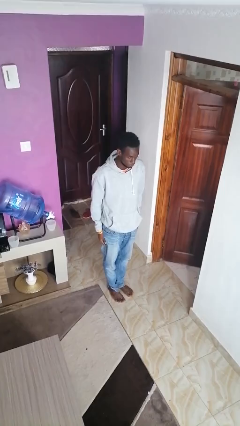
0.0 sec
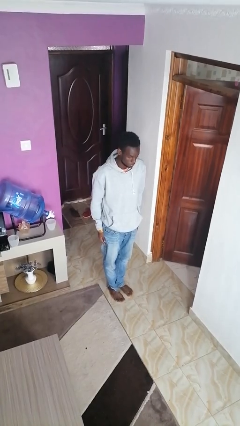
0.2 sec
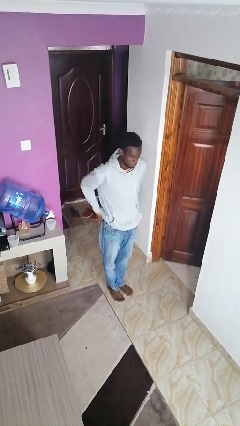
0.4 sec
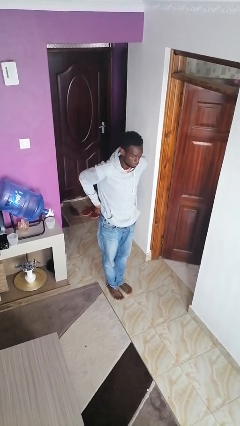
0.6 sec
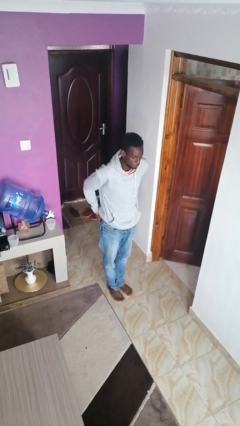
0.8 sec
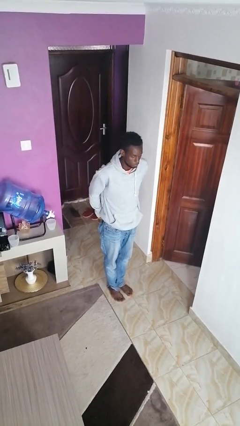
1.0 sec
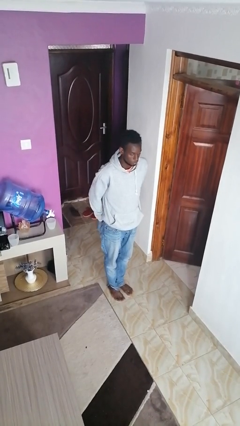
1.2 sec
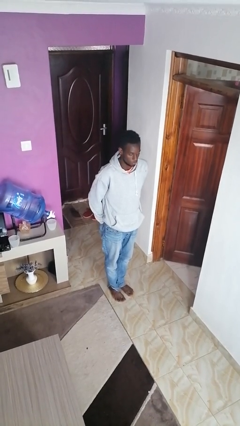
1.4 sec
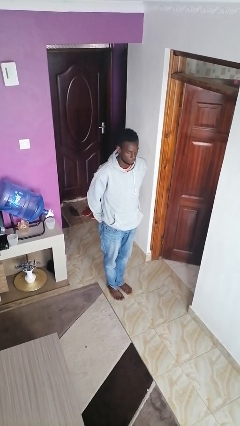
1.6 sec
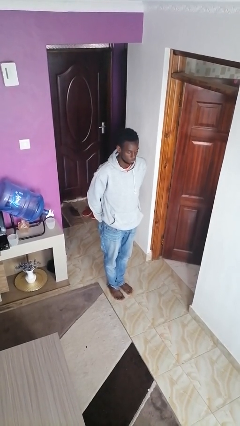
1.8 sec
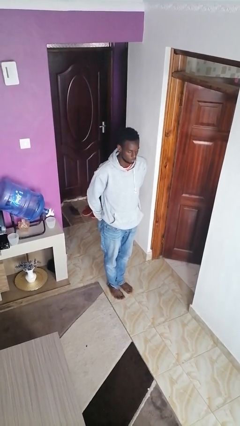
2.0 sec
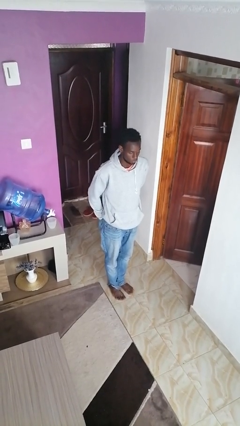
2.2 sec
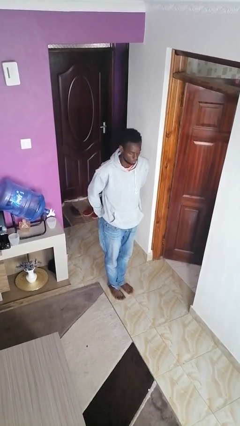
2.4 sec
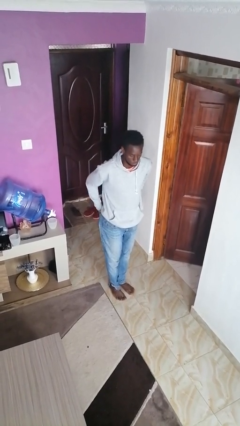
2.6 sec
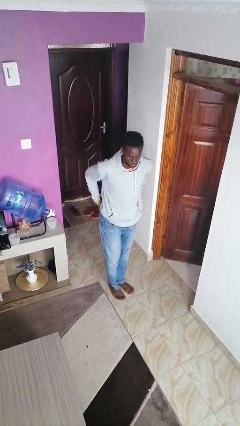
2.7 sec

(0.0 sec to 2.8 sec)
person puts hands in back pockets

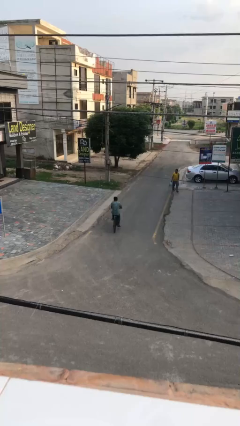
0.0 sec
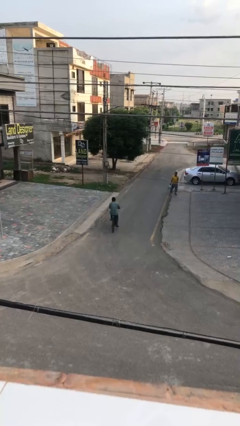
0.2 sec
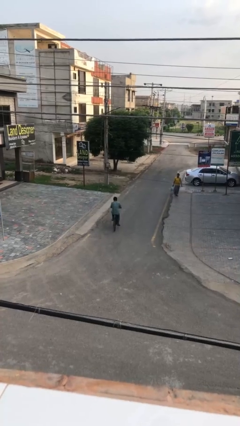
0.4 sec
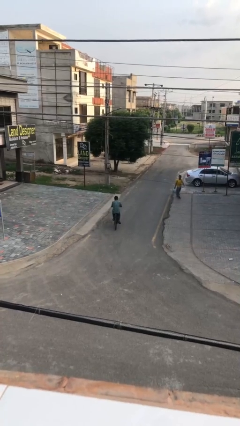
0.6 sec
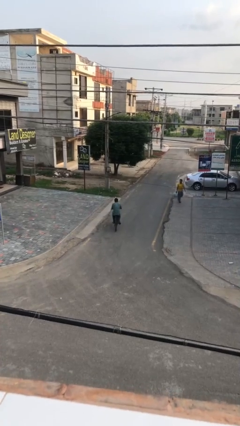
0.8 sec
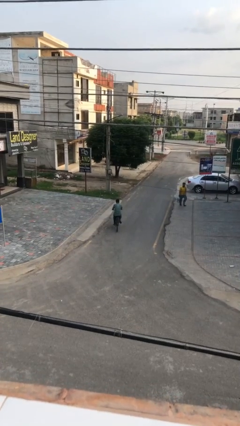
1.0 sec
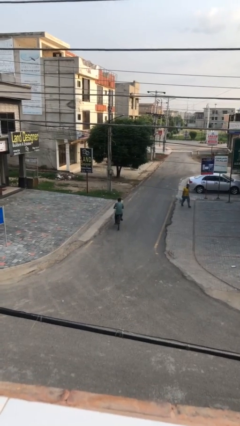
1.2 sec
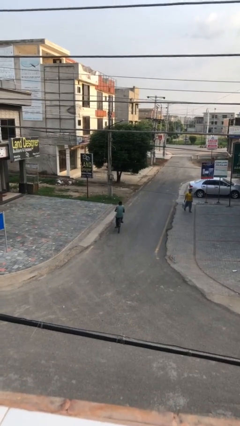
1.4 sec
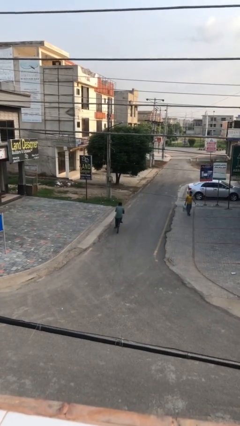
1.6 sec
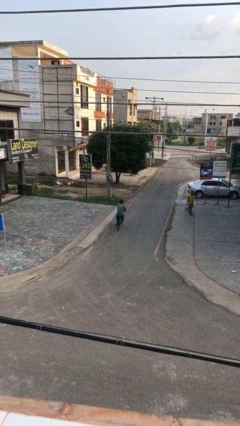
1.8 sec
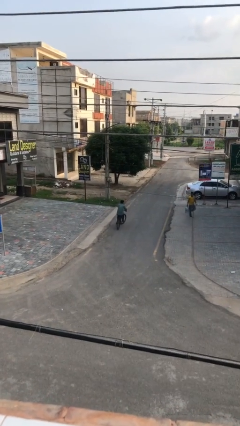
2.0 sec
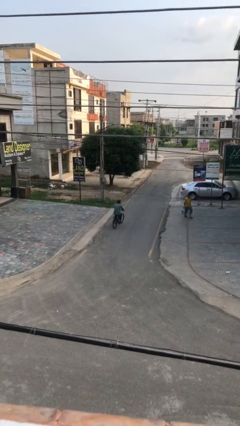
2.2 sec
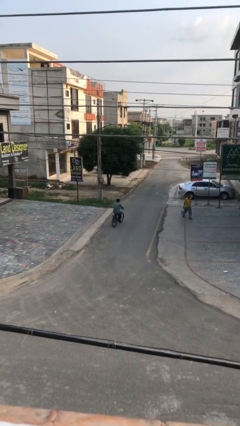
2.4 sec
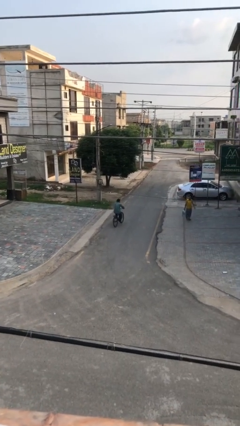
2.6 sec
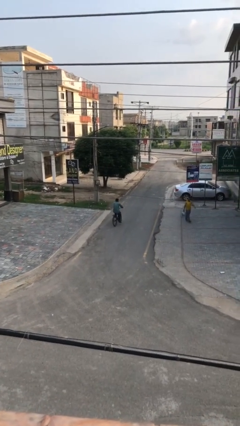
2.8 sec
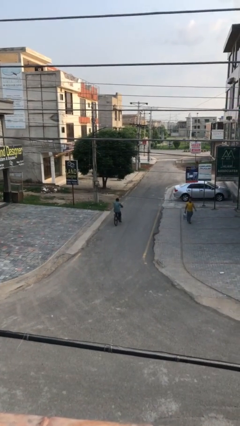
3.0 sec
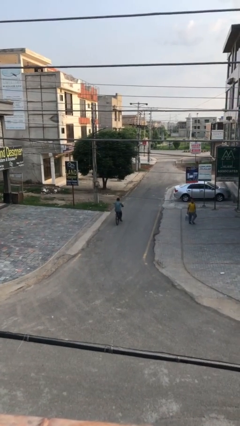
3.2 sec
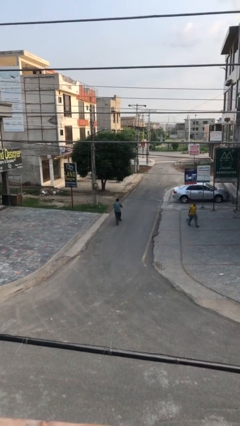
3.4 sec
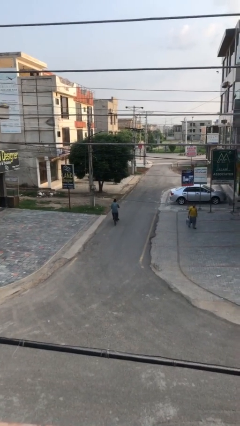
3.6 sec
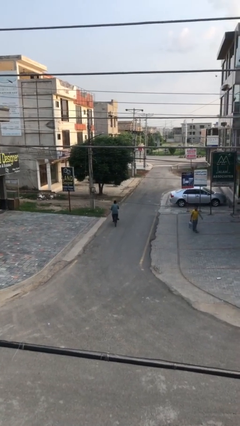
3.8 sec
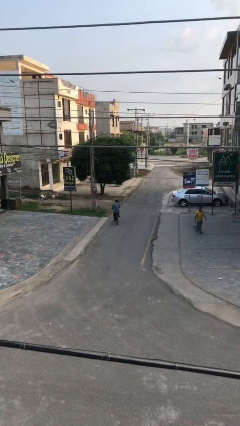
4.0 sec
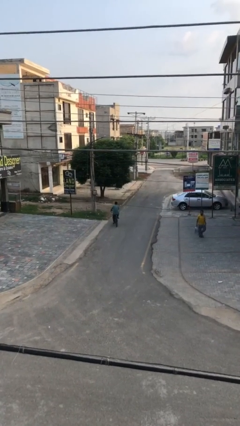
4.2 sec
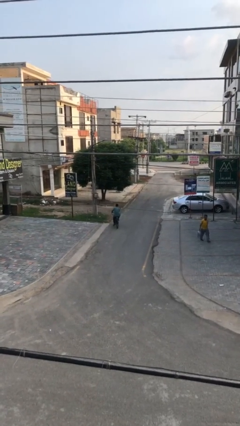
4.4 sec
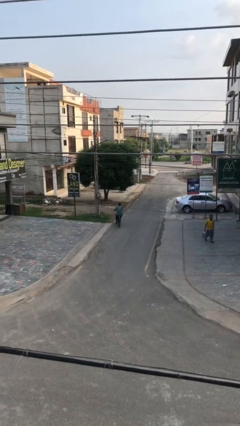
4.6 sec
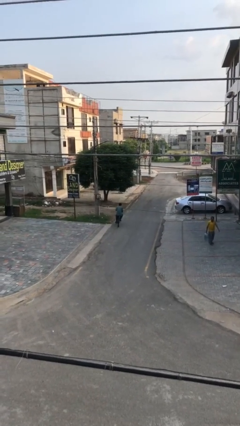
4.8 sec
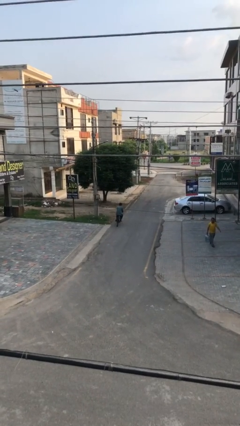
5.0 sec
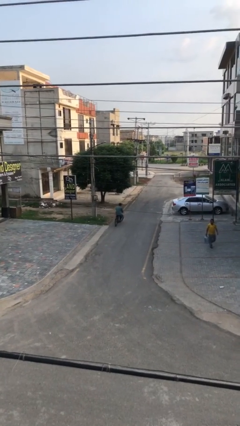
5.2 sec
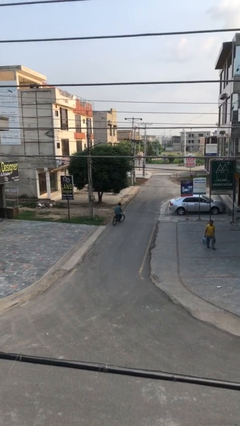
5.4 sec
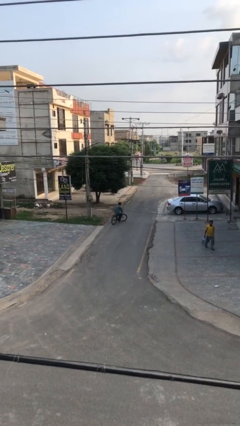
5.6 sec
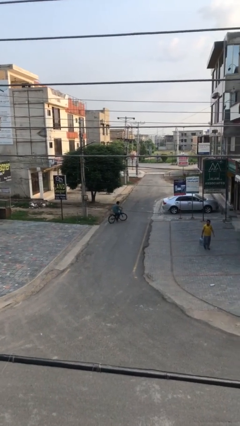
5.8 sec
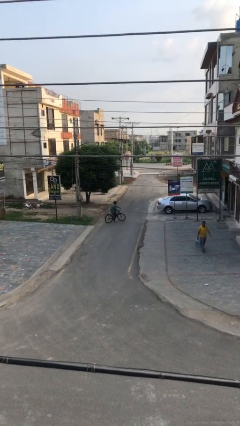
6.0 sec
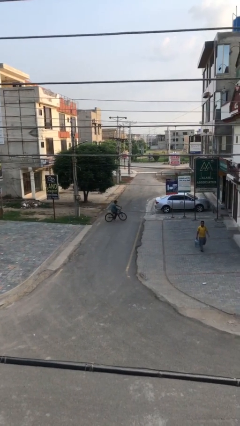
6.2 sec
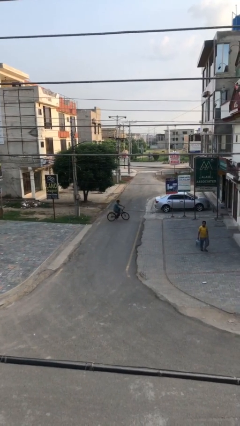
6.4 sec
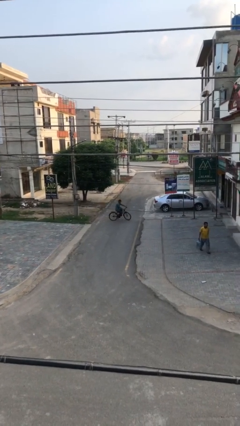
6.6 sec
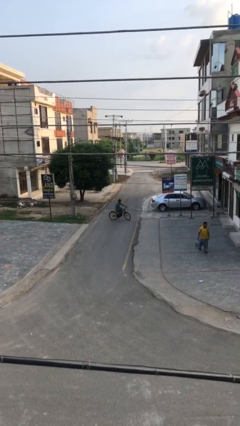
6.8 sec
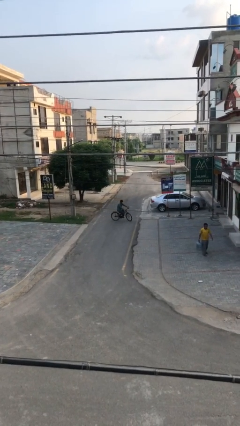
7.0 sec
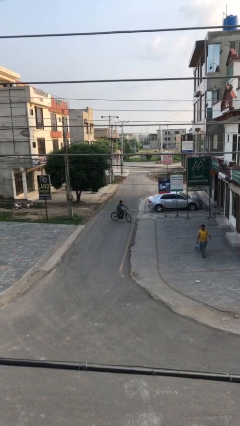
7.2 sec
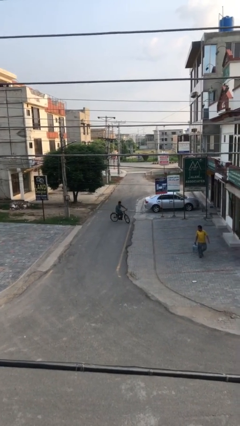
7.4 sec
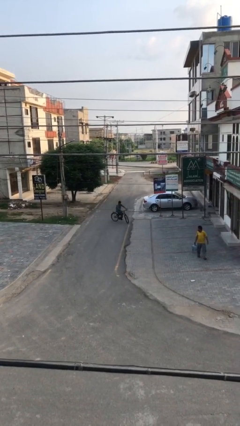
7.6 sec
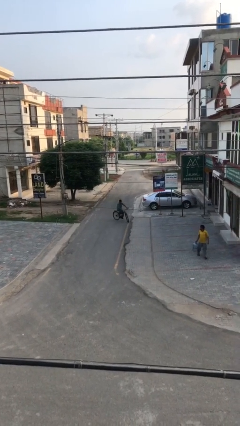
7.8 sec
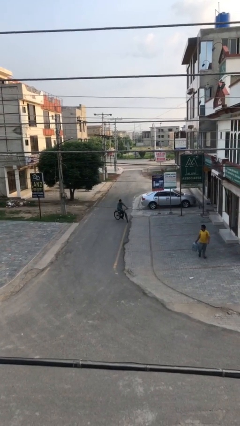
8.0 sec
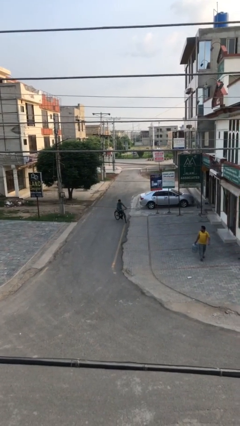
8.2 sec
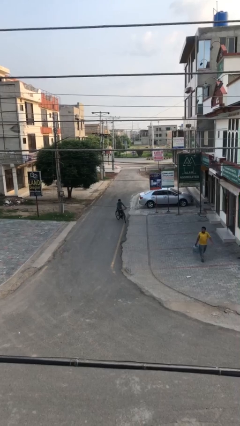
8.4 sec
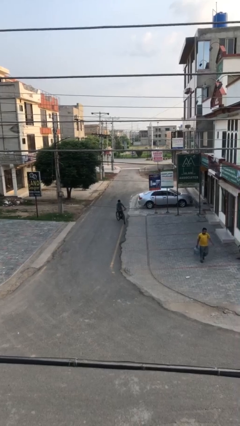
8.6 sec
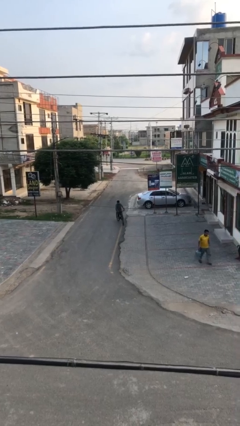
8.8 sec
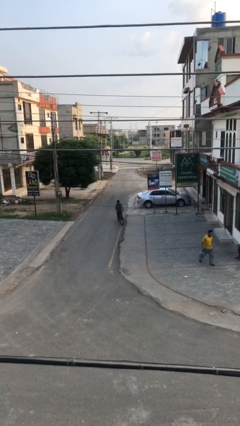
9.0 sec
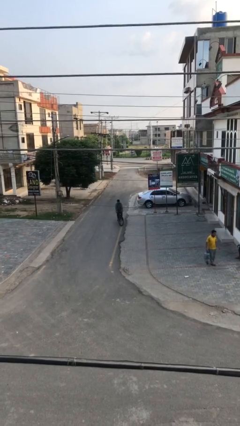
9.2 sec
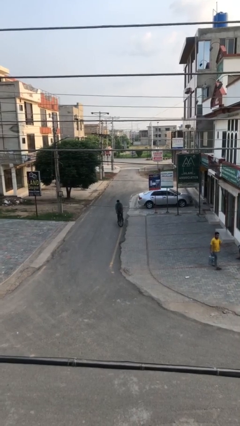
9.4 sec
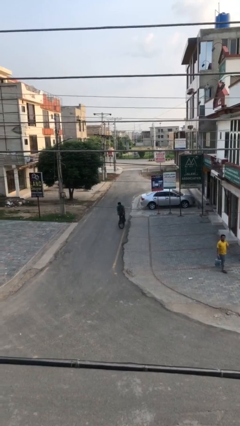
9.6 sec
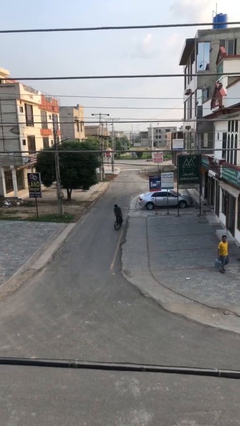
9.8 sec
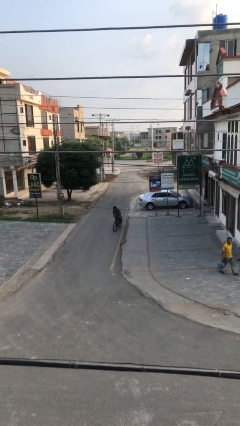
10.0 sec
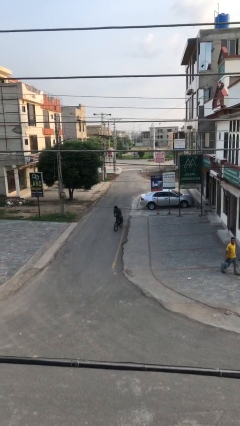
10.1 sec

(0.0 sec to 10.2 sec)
person rides bicycle

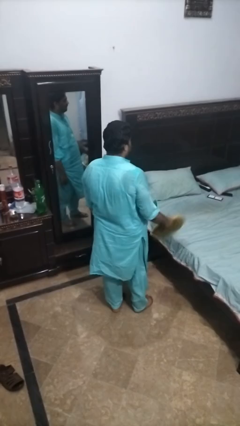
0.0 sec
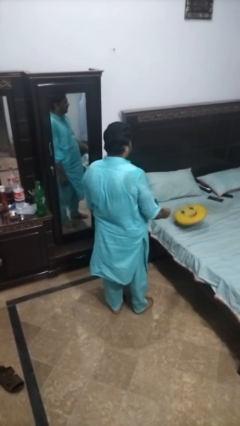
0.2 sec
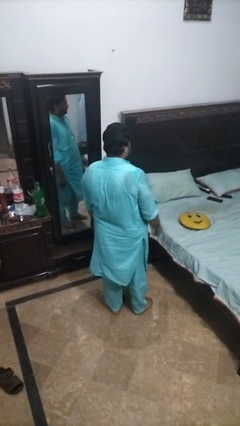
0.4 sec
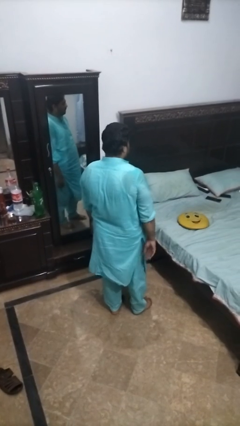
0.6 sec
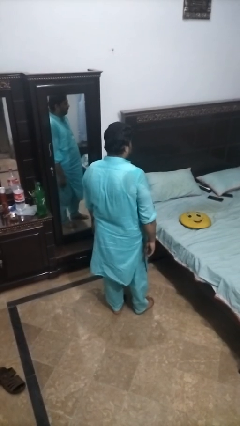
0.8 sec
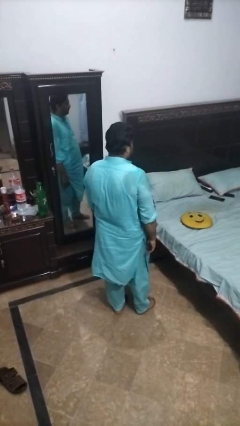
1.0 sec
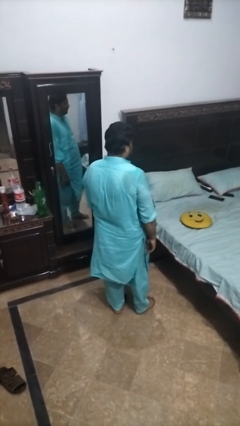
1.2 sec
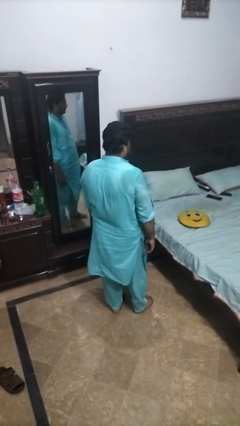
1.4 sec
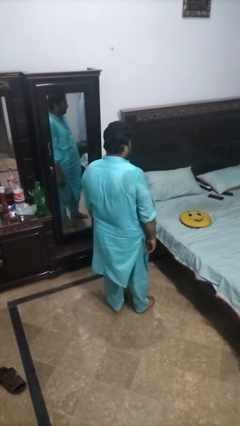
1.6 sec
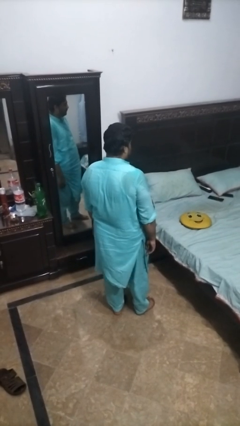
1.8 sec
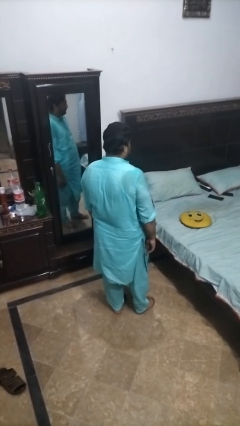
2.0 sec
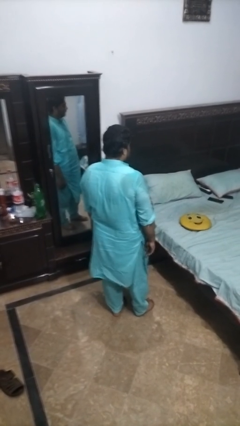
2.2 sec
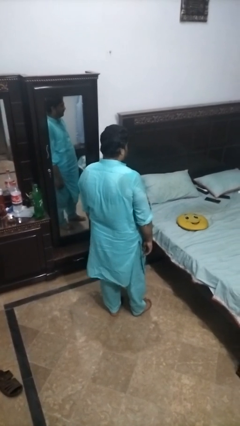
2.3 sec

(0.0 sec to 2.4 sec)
person throws object on bed

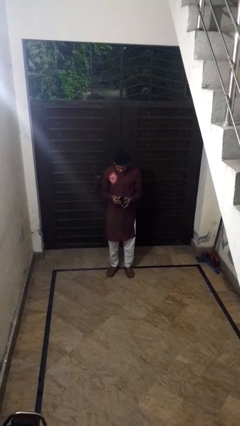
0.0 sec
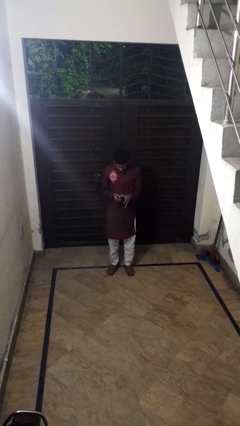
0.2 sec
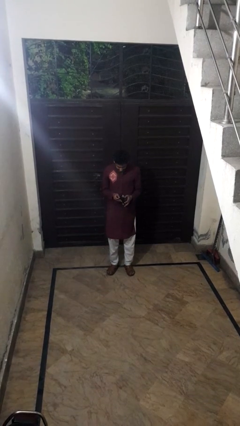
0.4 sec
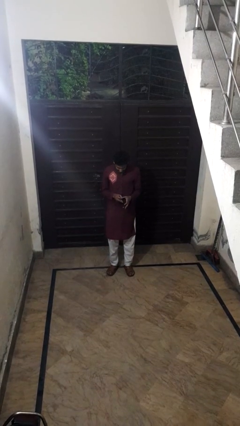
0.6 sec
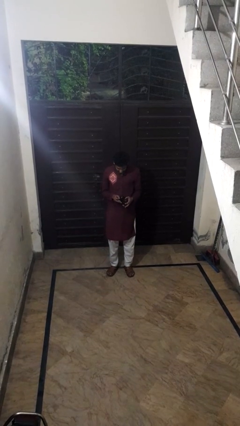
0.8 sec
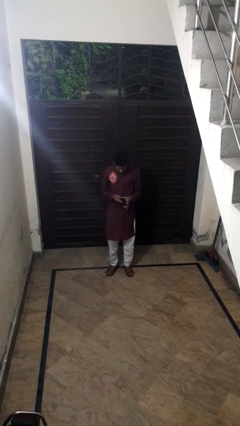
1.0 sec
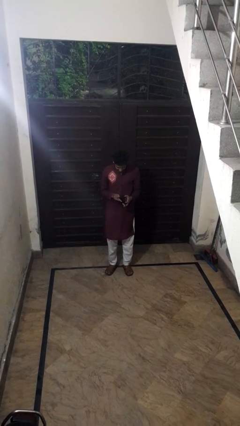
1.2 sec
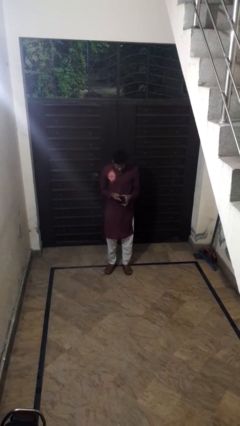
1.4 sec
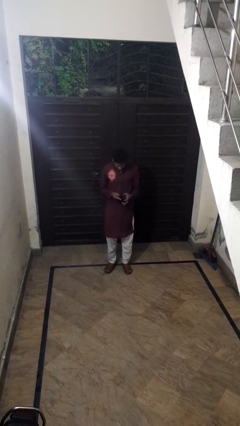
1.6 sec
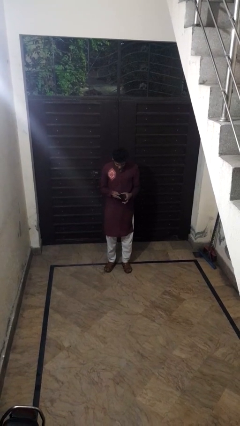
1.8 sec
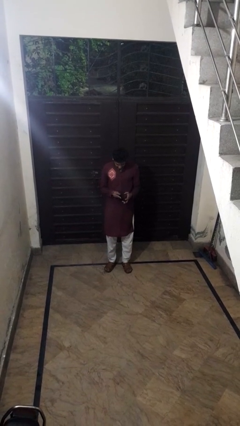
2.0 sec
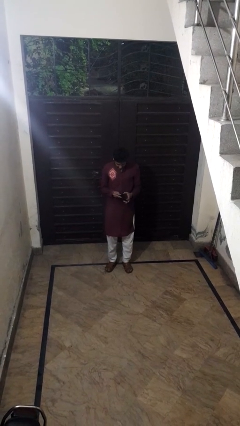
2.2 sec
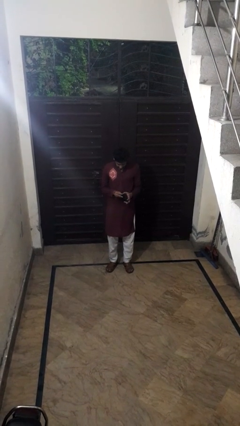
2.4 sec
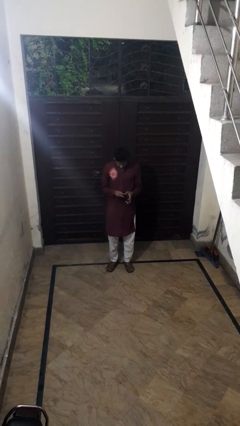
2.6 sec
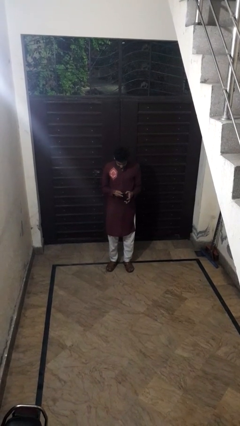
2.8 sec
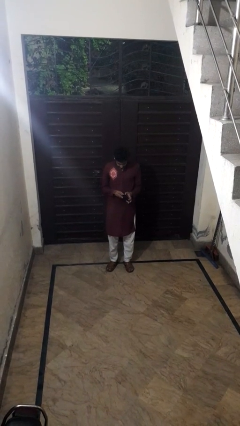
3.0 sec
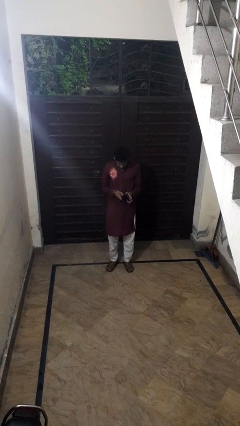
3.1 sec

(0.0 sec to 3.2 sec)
person searches in purse
